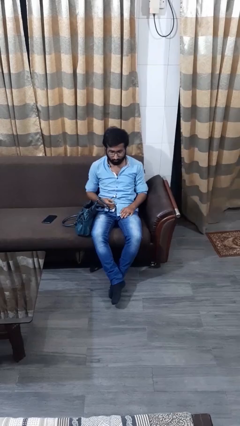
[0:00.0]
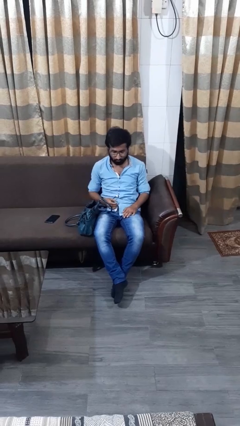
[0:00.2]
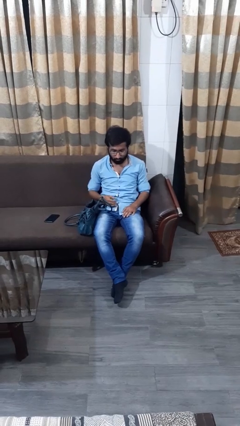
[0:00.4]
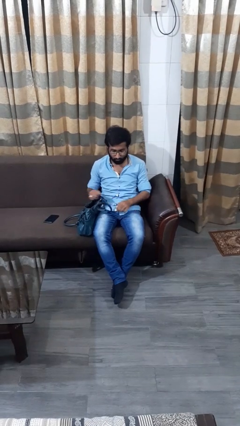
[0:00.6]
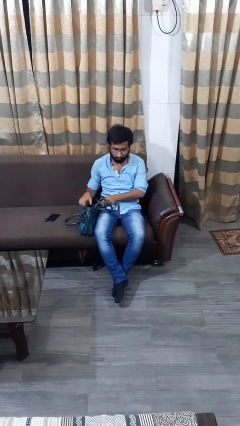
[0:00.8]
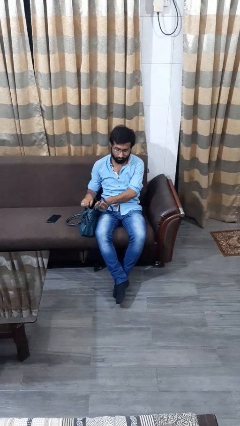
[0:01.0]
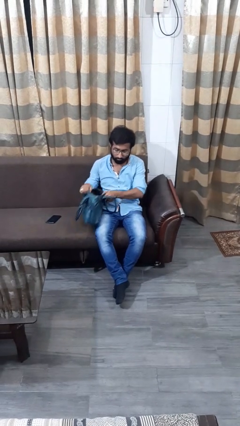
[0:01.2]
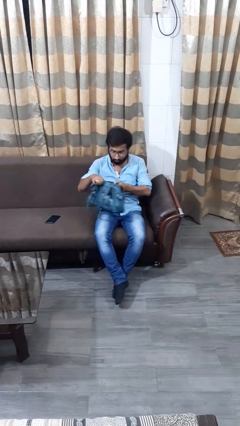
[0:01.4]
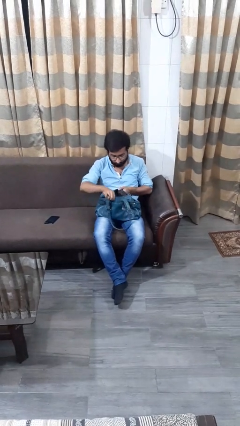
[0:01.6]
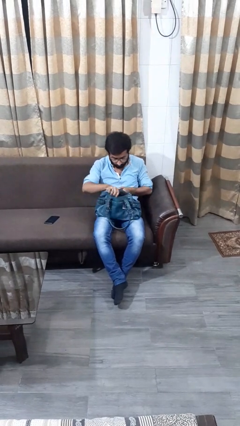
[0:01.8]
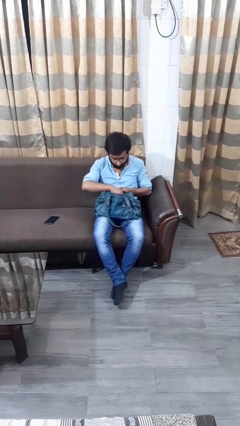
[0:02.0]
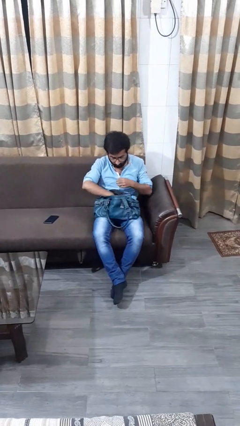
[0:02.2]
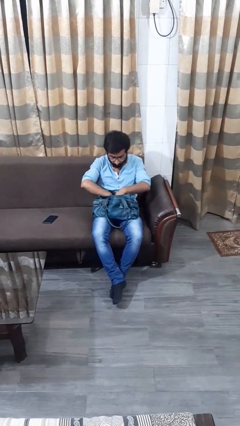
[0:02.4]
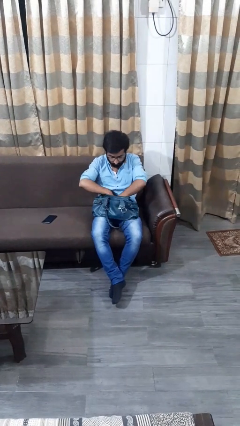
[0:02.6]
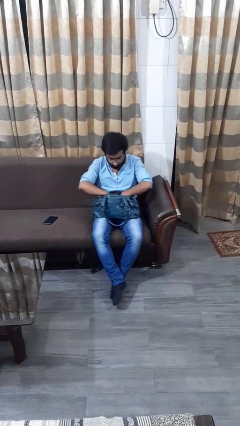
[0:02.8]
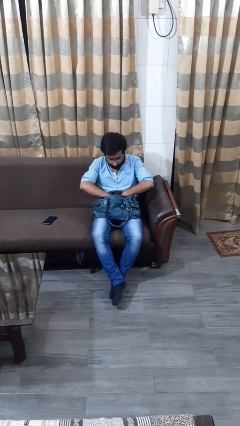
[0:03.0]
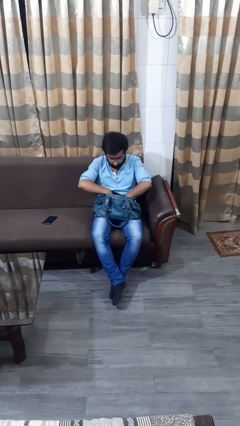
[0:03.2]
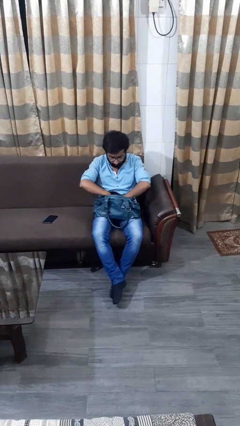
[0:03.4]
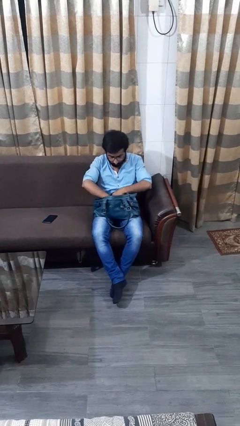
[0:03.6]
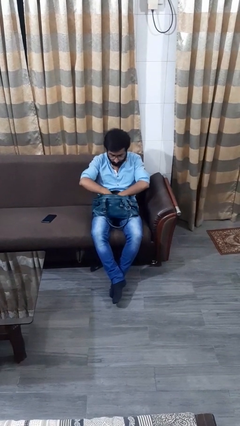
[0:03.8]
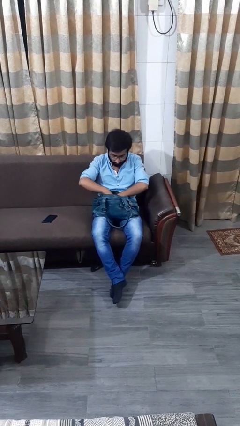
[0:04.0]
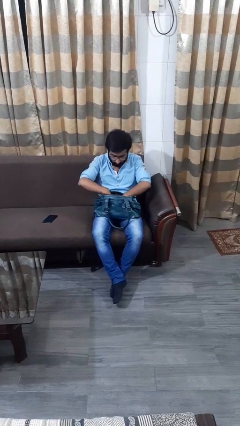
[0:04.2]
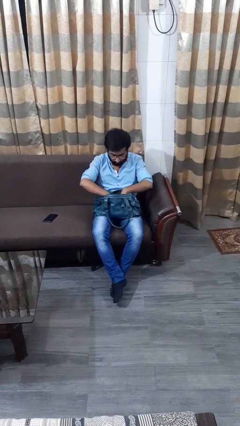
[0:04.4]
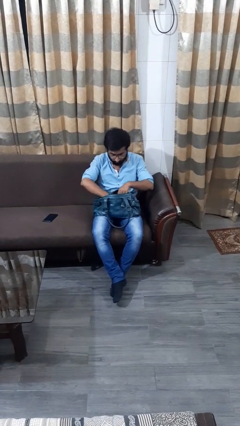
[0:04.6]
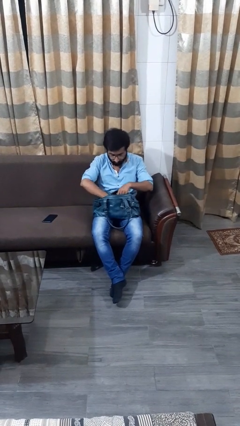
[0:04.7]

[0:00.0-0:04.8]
person searches in purse

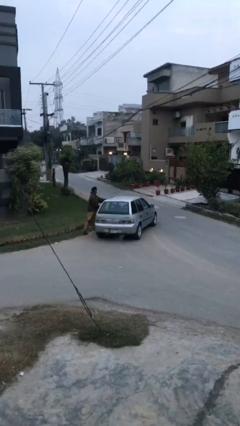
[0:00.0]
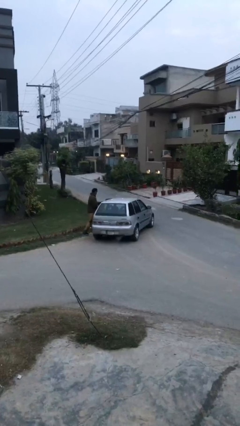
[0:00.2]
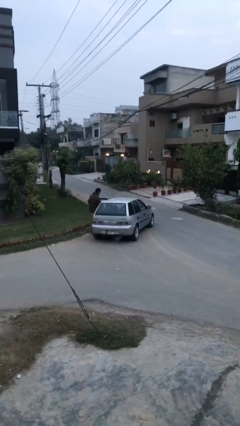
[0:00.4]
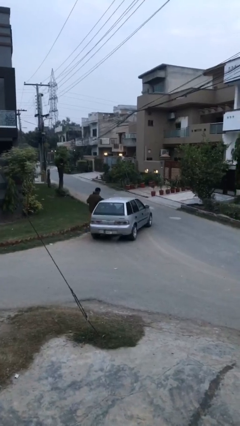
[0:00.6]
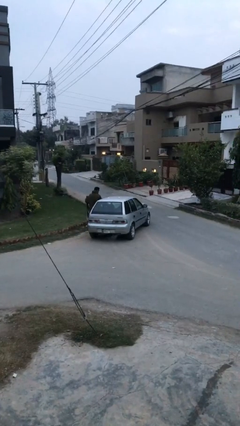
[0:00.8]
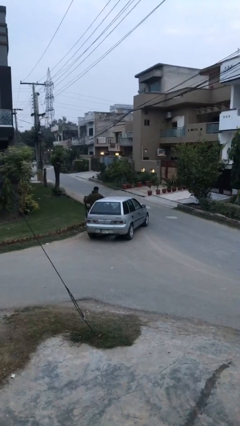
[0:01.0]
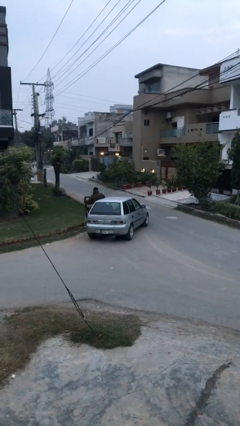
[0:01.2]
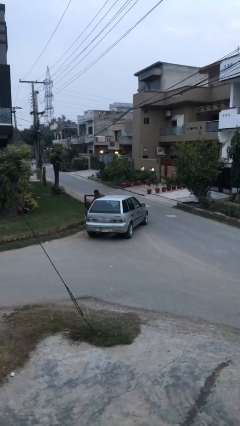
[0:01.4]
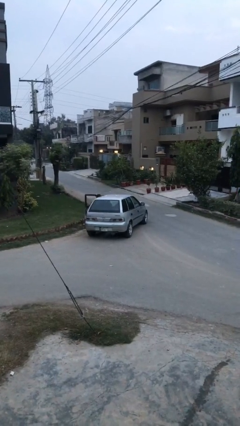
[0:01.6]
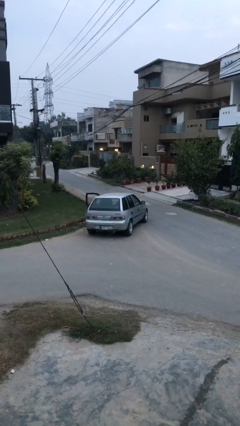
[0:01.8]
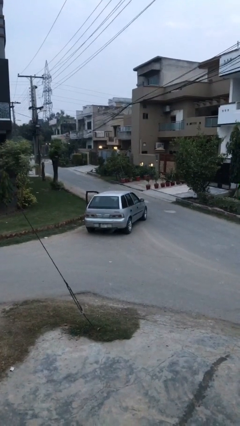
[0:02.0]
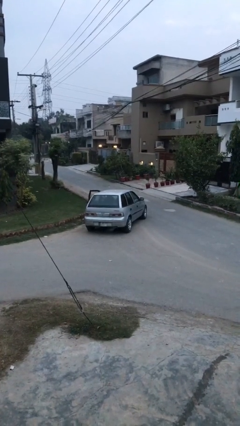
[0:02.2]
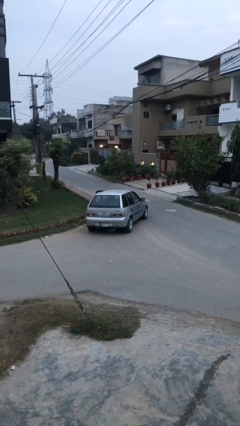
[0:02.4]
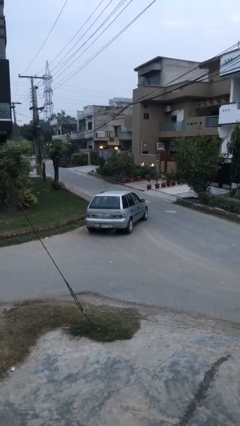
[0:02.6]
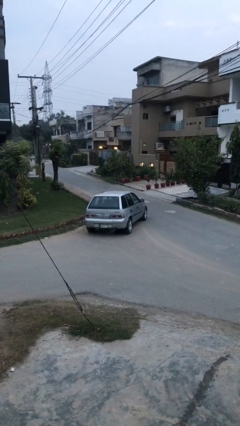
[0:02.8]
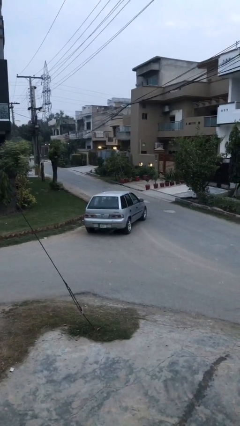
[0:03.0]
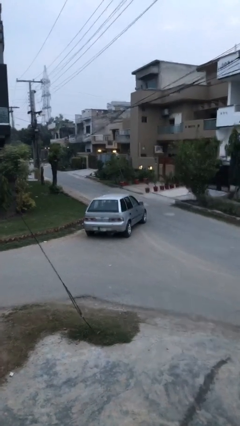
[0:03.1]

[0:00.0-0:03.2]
car picks up person

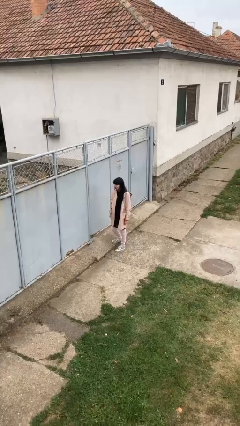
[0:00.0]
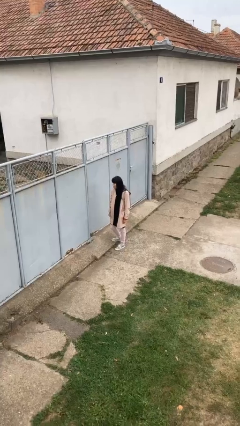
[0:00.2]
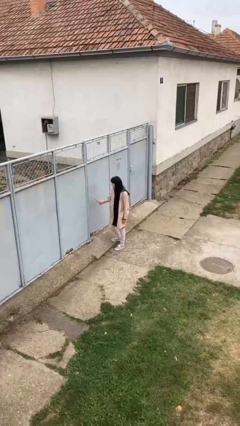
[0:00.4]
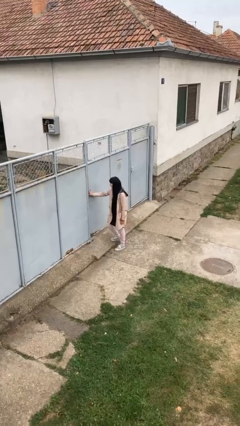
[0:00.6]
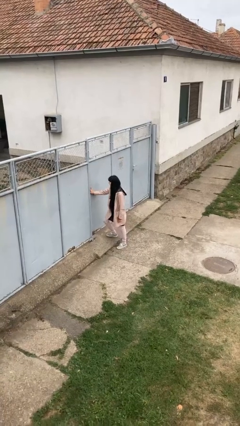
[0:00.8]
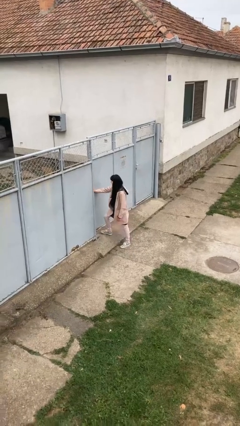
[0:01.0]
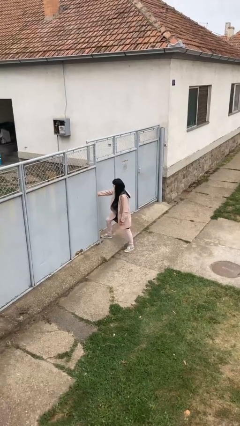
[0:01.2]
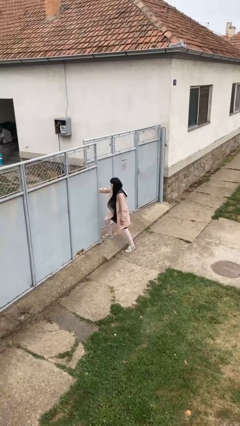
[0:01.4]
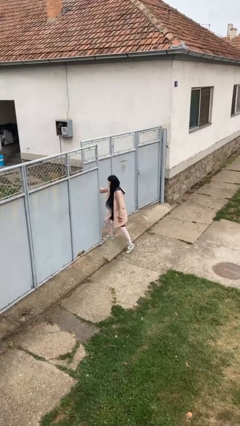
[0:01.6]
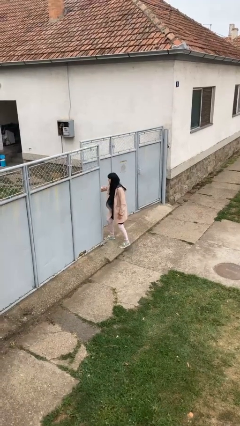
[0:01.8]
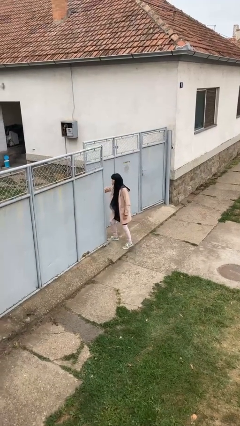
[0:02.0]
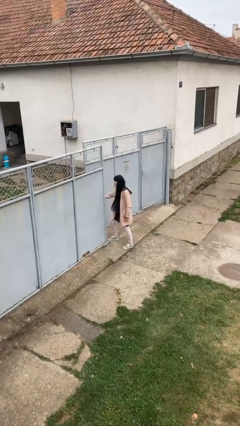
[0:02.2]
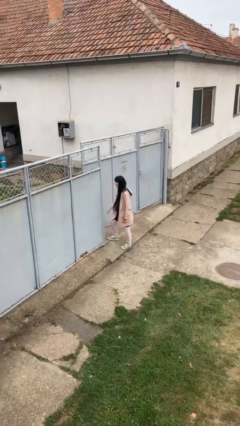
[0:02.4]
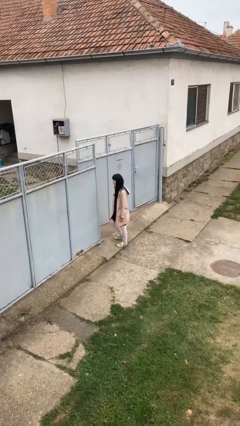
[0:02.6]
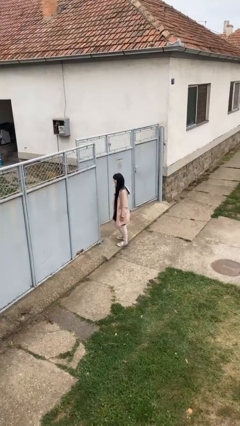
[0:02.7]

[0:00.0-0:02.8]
person opens gate

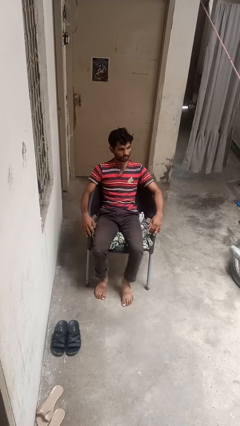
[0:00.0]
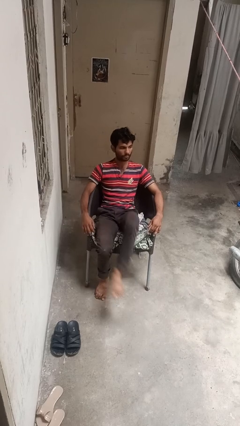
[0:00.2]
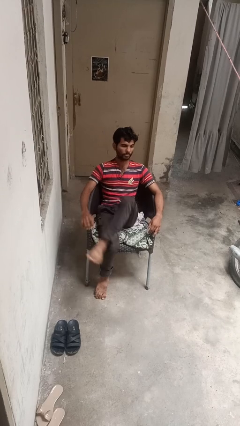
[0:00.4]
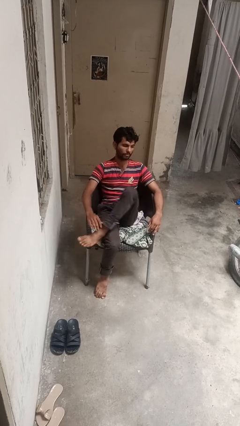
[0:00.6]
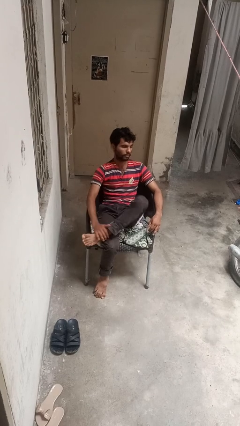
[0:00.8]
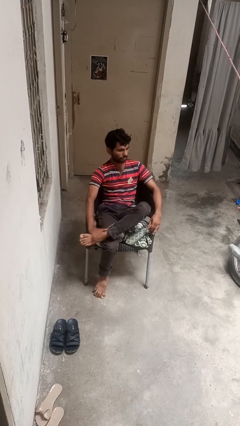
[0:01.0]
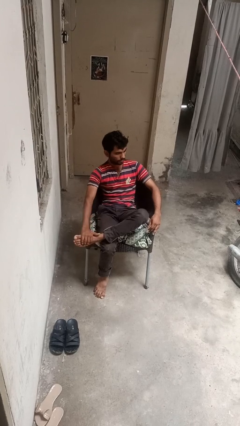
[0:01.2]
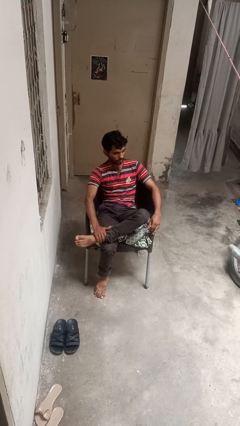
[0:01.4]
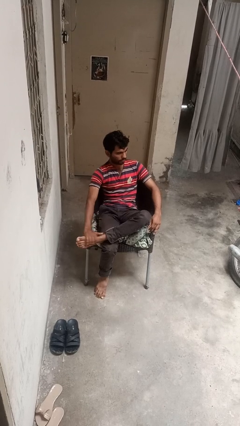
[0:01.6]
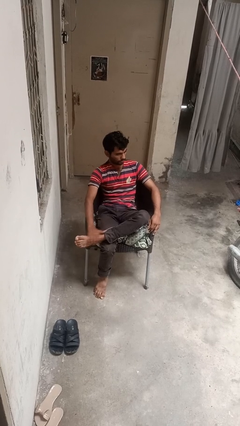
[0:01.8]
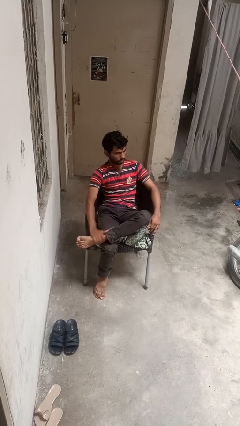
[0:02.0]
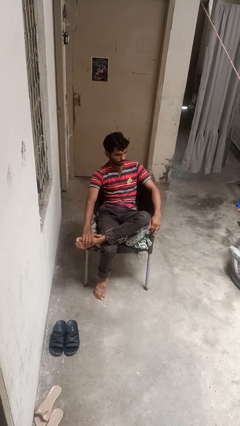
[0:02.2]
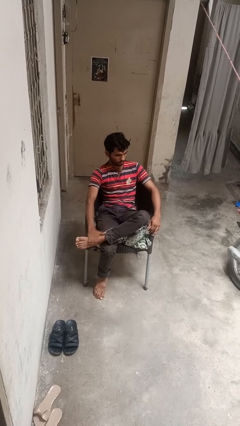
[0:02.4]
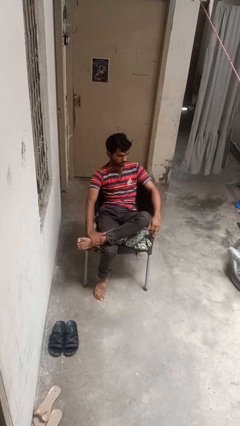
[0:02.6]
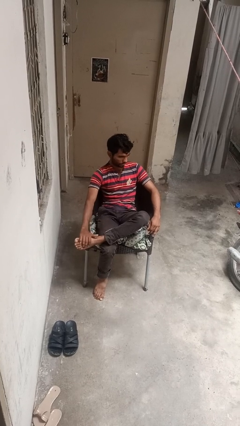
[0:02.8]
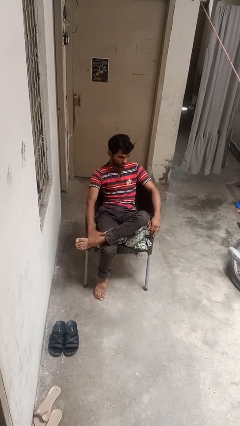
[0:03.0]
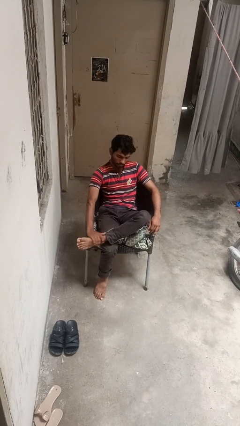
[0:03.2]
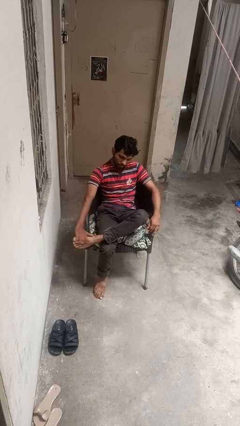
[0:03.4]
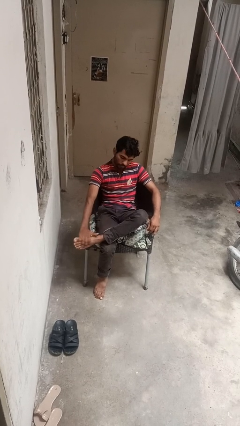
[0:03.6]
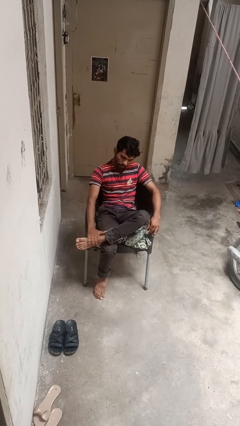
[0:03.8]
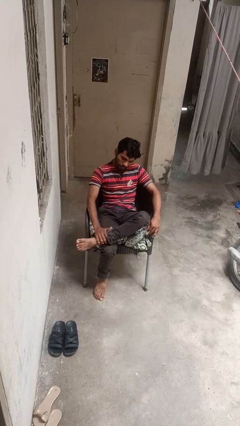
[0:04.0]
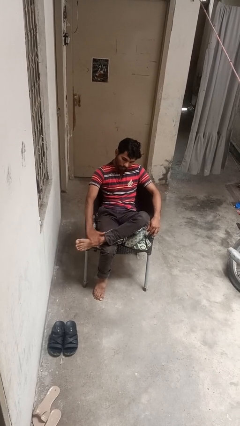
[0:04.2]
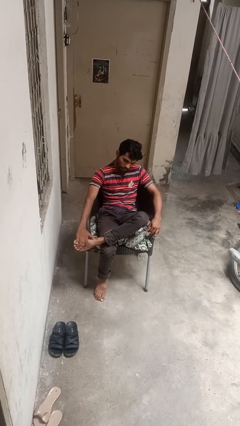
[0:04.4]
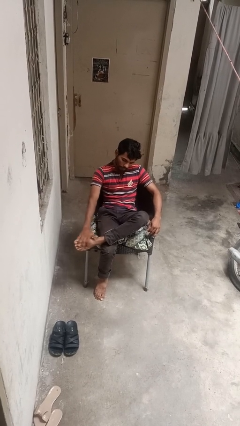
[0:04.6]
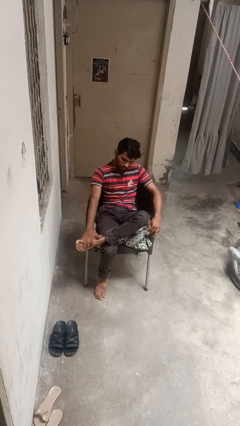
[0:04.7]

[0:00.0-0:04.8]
person rubs foot

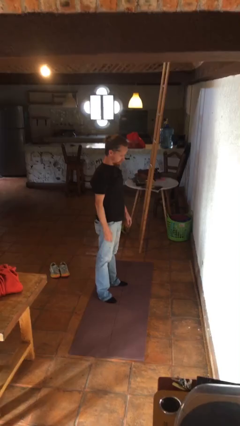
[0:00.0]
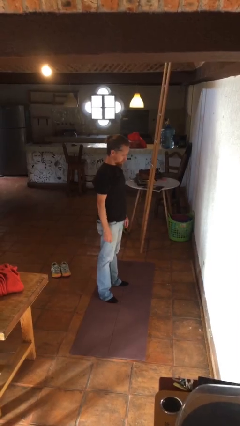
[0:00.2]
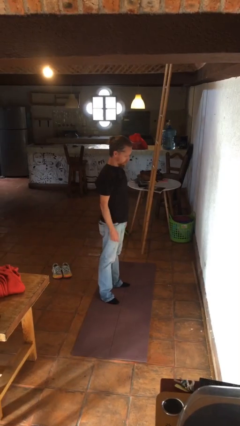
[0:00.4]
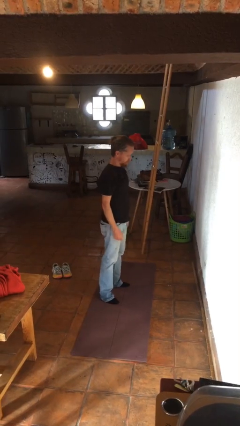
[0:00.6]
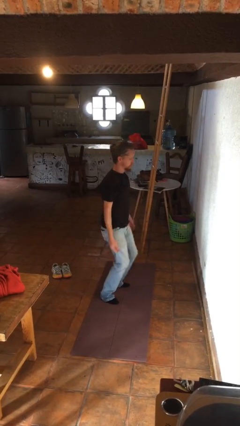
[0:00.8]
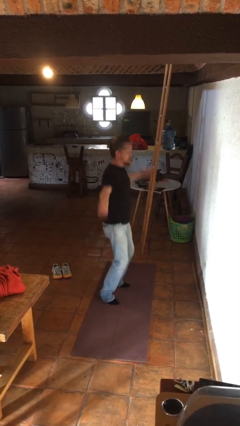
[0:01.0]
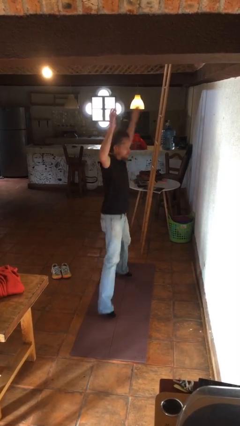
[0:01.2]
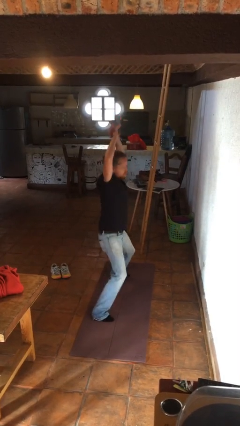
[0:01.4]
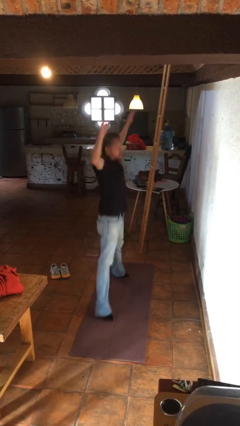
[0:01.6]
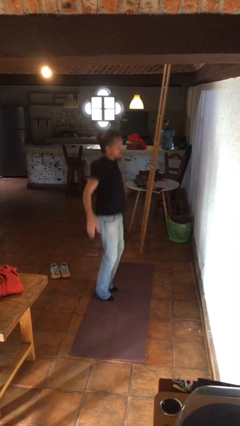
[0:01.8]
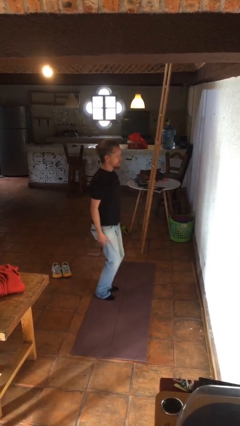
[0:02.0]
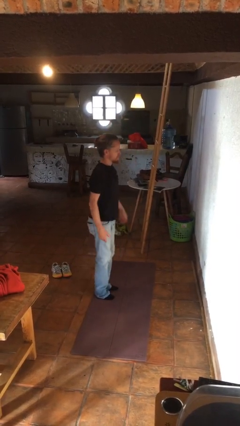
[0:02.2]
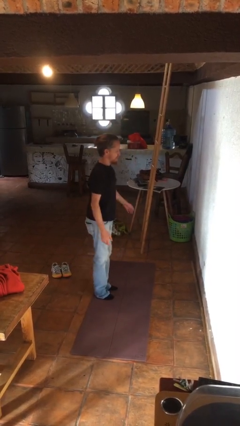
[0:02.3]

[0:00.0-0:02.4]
person exercises with jumping jacks
